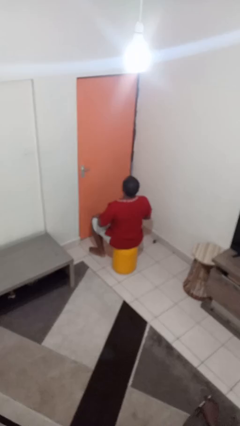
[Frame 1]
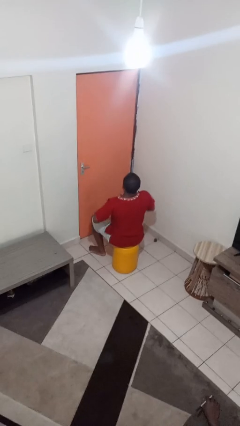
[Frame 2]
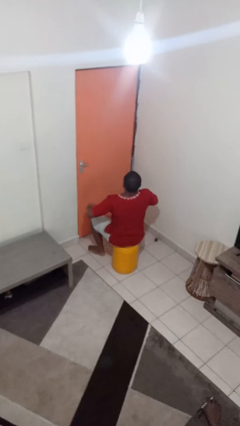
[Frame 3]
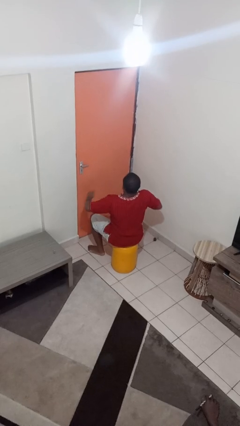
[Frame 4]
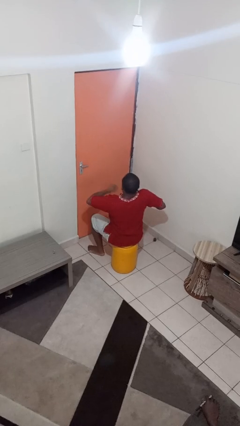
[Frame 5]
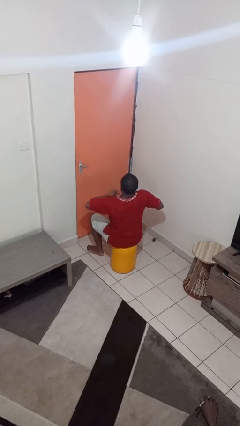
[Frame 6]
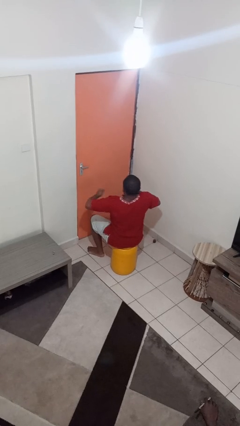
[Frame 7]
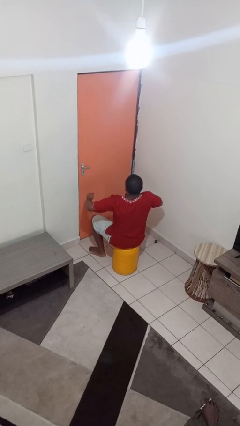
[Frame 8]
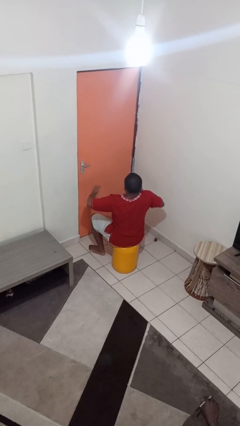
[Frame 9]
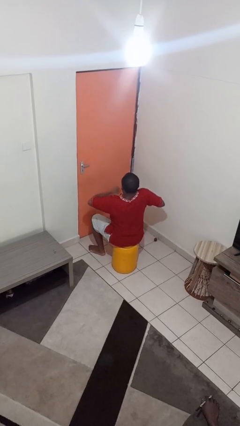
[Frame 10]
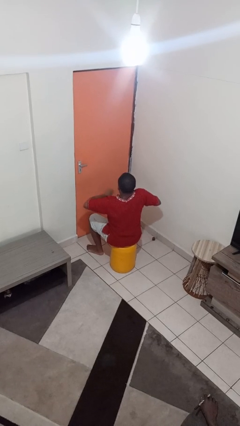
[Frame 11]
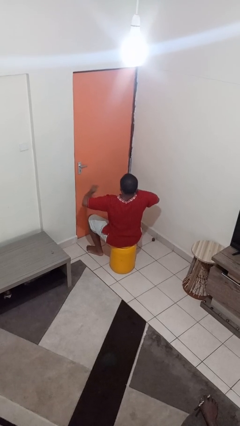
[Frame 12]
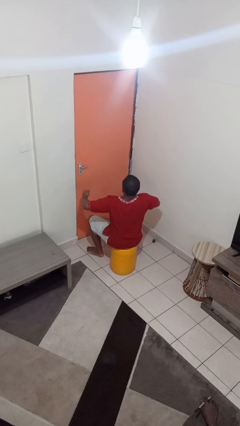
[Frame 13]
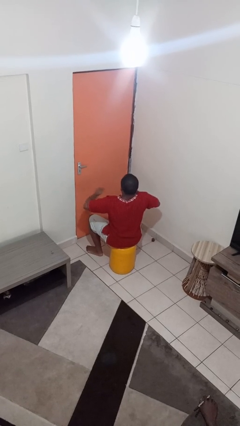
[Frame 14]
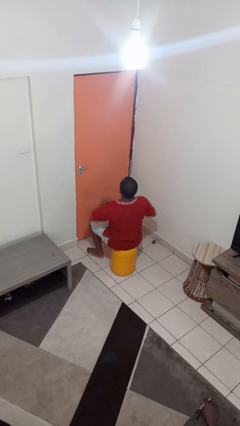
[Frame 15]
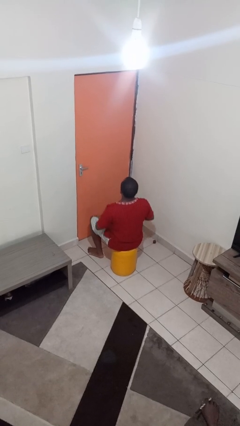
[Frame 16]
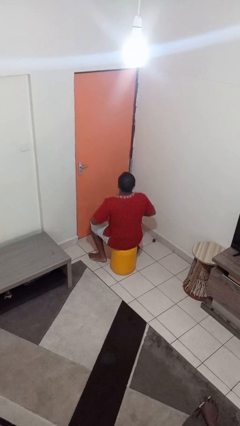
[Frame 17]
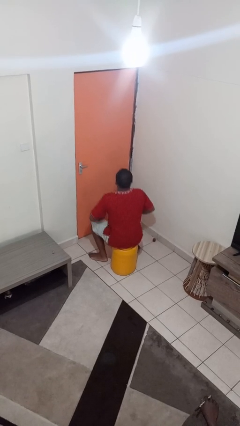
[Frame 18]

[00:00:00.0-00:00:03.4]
person drums on chest

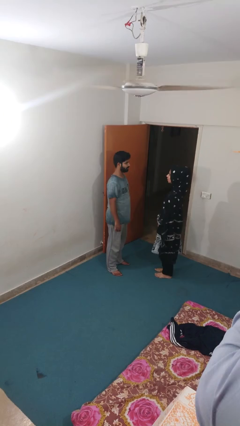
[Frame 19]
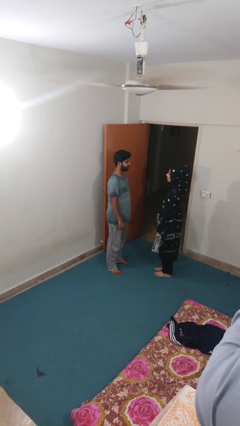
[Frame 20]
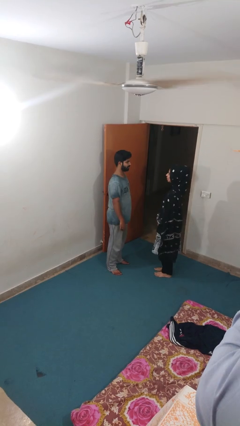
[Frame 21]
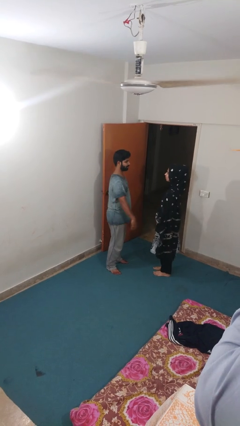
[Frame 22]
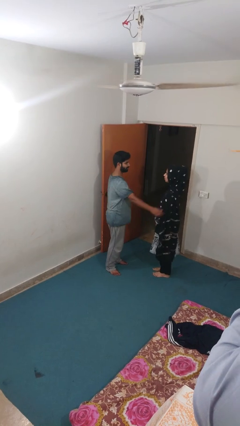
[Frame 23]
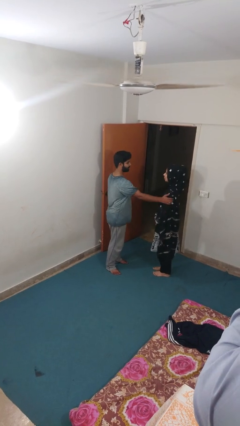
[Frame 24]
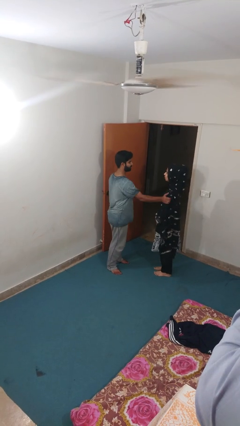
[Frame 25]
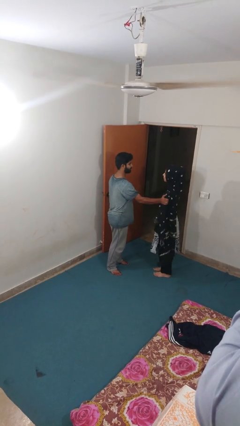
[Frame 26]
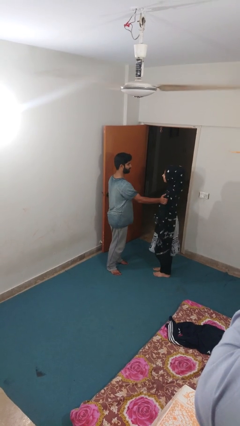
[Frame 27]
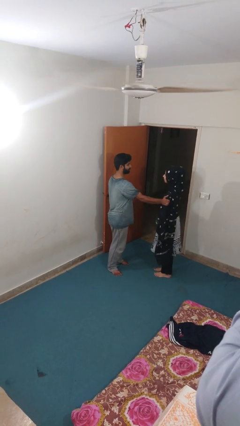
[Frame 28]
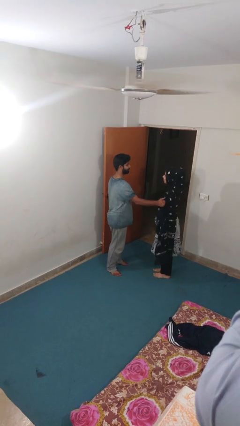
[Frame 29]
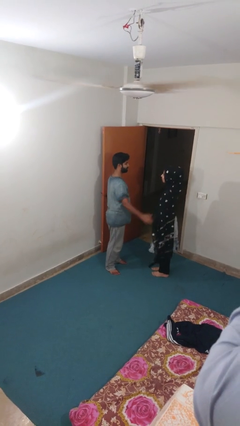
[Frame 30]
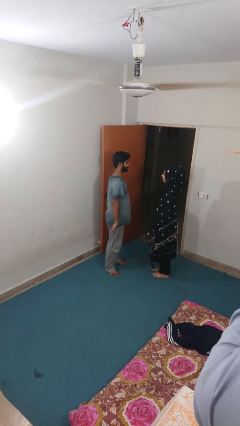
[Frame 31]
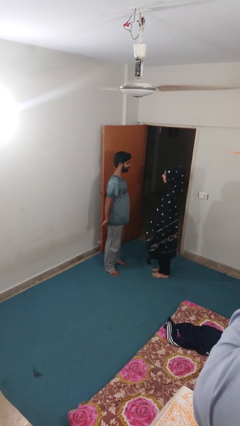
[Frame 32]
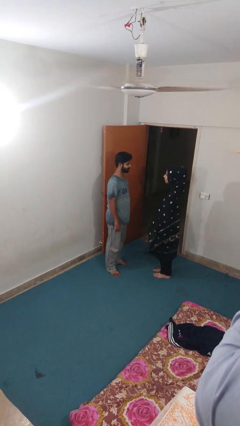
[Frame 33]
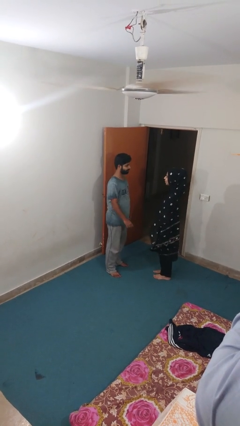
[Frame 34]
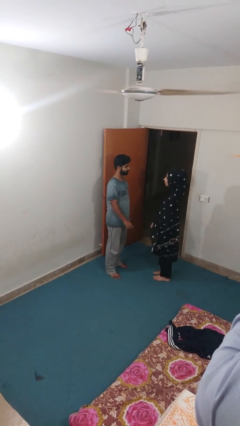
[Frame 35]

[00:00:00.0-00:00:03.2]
person grabs person by bicep

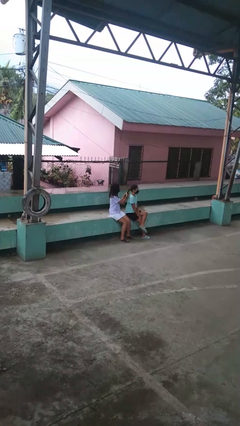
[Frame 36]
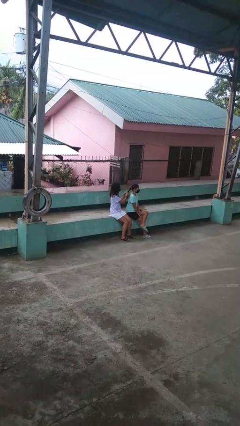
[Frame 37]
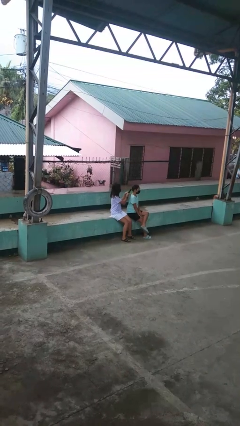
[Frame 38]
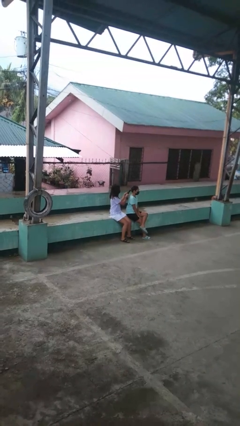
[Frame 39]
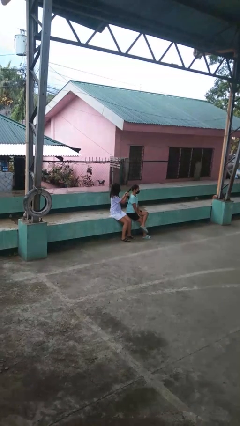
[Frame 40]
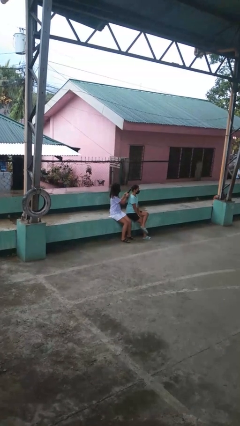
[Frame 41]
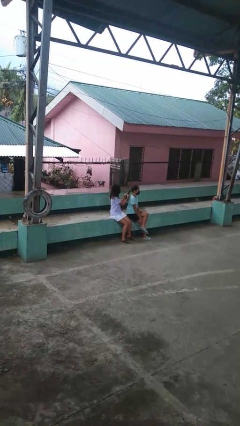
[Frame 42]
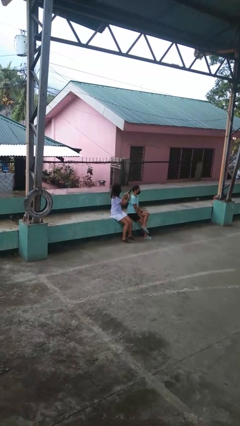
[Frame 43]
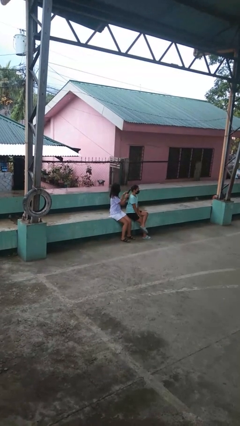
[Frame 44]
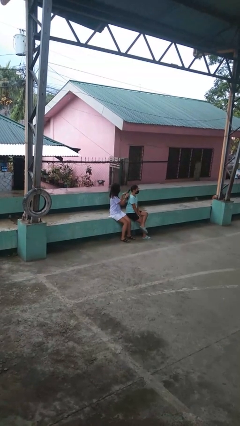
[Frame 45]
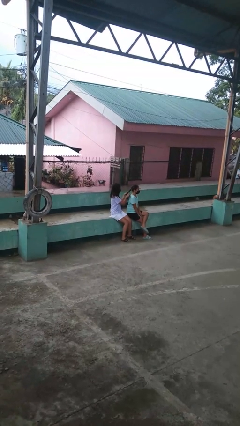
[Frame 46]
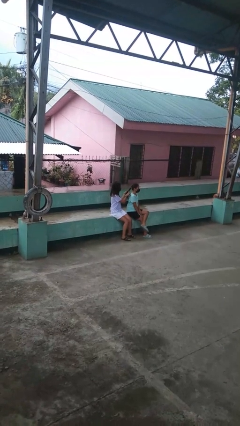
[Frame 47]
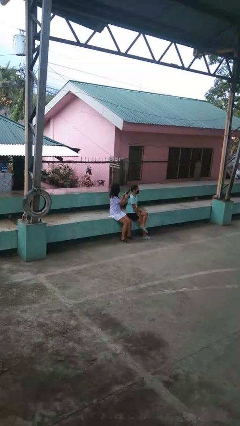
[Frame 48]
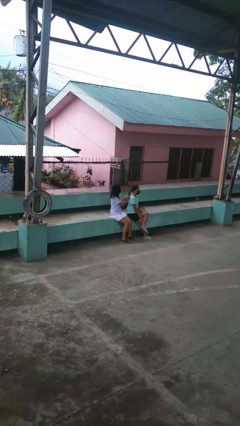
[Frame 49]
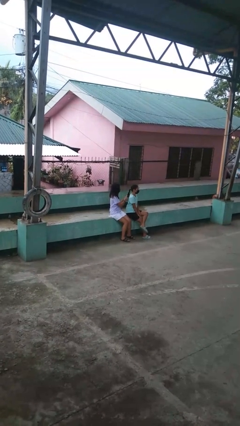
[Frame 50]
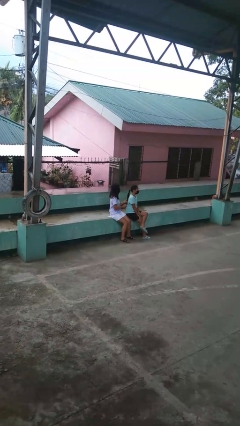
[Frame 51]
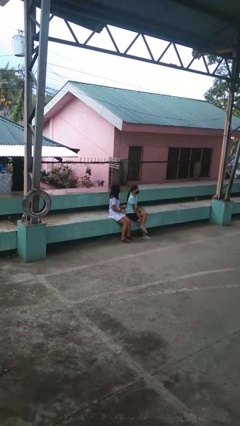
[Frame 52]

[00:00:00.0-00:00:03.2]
person braids hair of person

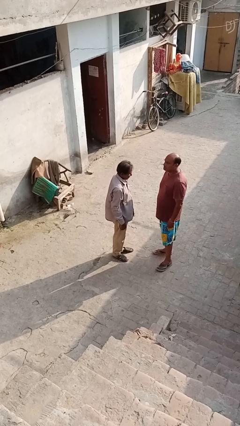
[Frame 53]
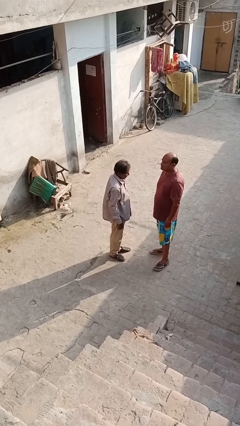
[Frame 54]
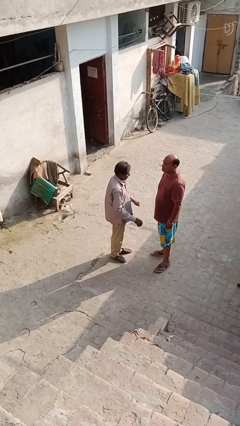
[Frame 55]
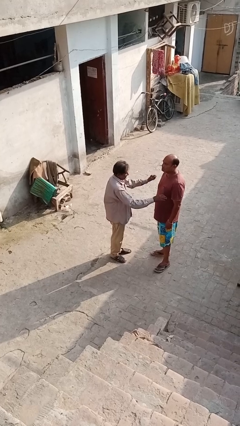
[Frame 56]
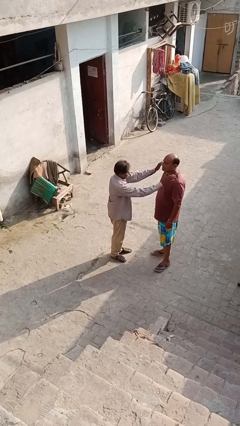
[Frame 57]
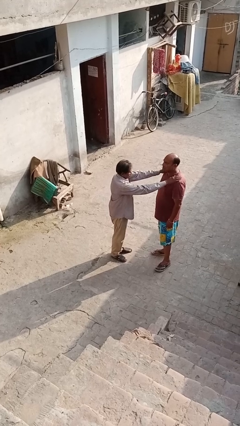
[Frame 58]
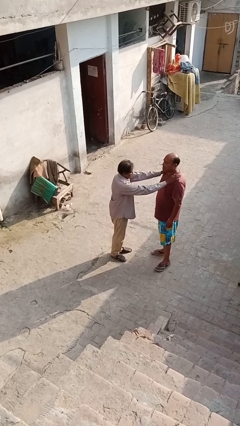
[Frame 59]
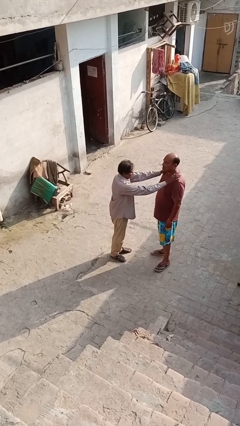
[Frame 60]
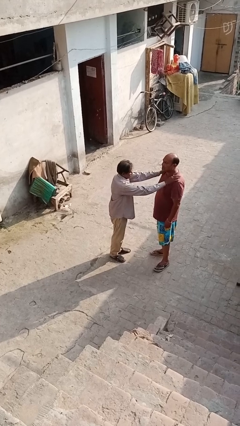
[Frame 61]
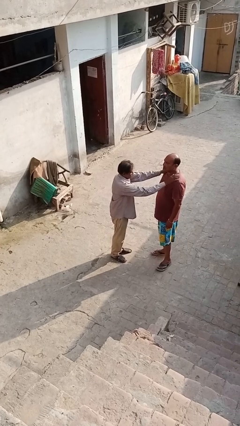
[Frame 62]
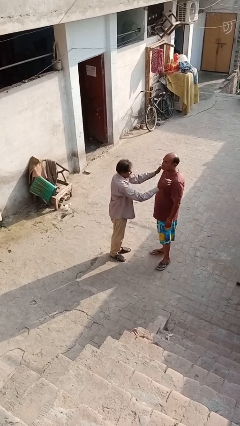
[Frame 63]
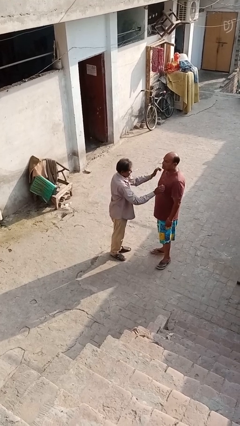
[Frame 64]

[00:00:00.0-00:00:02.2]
person pounds shoulders of person

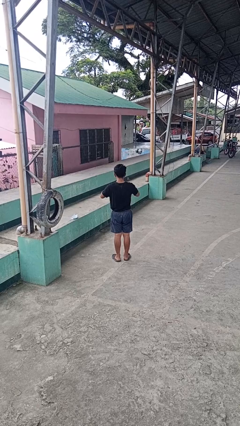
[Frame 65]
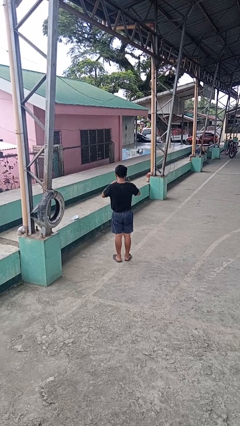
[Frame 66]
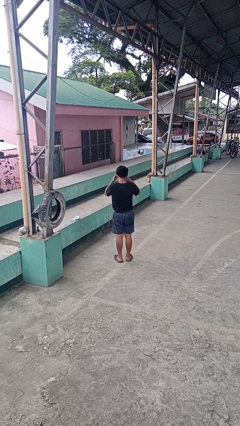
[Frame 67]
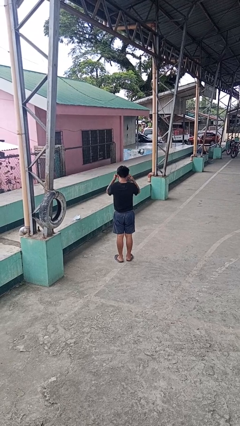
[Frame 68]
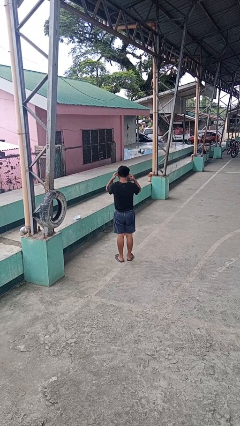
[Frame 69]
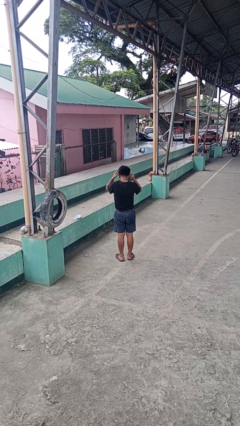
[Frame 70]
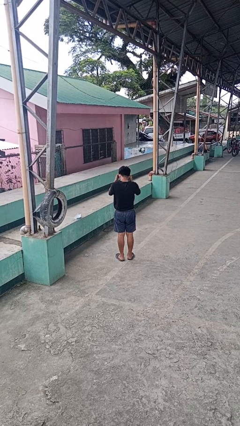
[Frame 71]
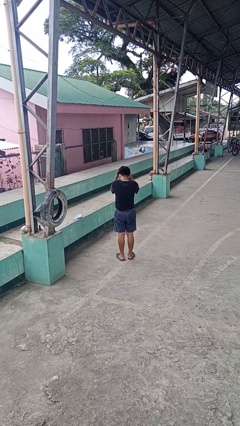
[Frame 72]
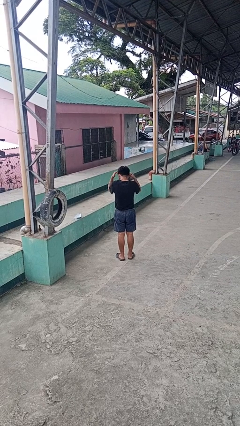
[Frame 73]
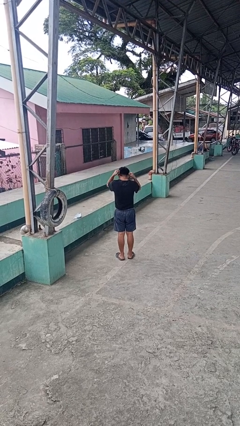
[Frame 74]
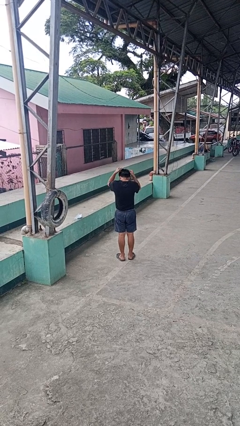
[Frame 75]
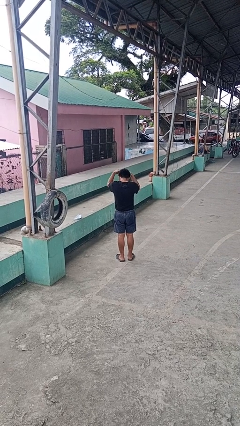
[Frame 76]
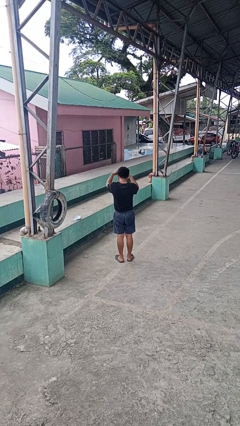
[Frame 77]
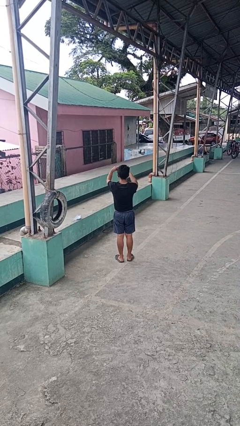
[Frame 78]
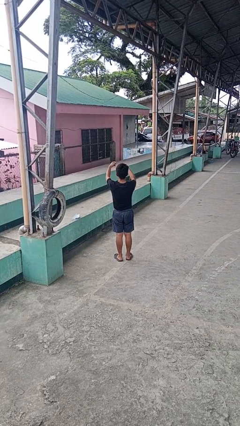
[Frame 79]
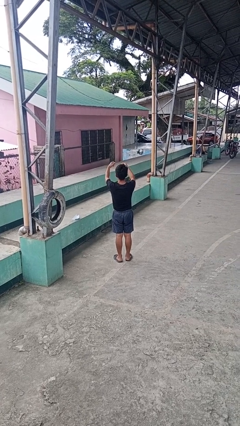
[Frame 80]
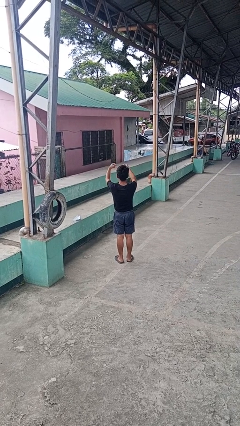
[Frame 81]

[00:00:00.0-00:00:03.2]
person takes off necklace

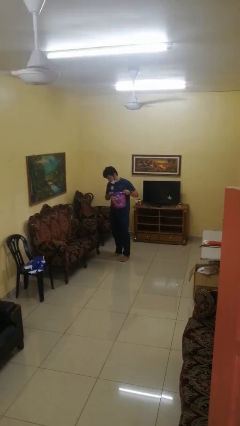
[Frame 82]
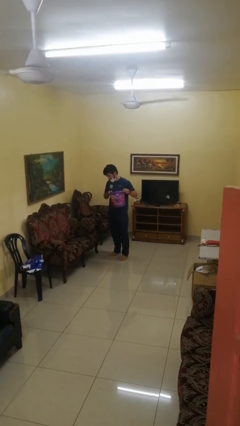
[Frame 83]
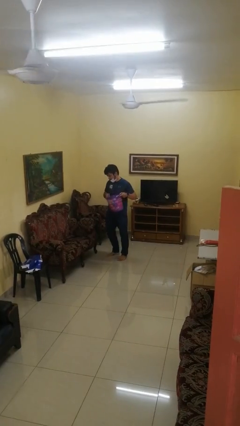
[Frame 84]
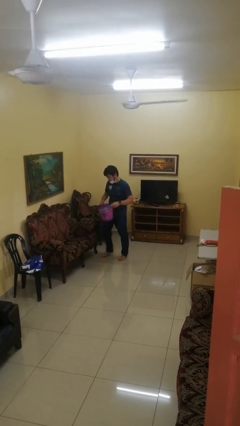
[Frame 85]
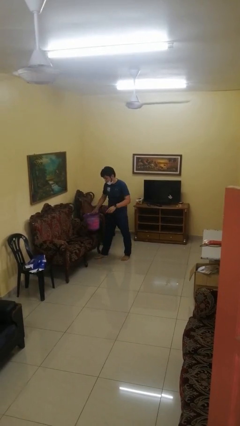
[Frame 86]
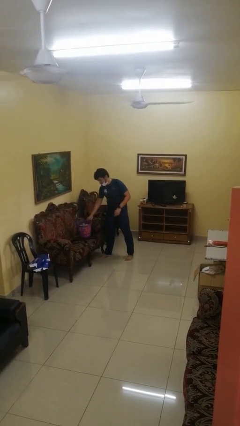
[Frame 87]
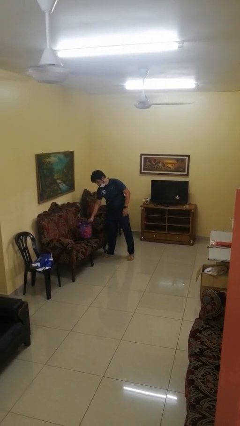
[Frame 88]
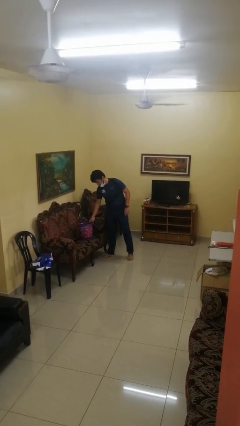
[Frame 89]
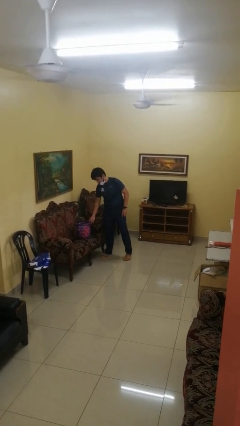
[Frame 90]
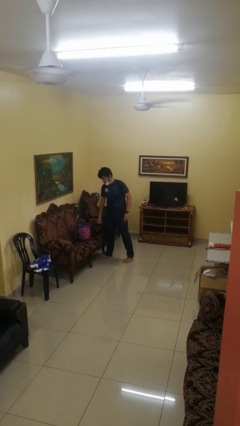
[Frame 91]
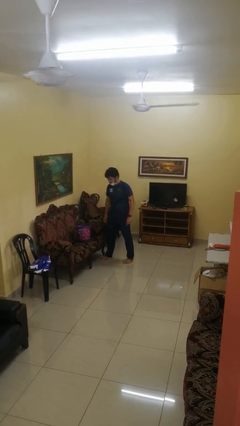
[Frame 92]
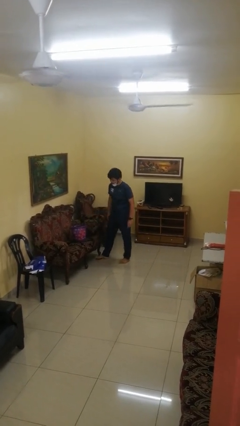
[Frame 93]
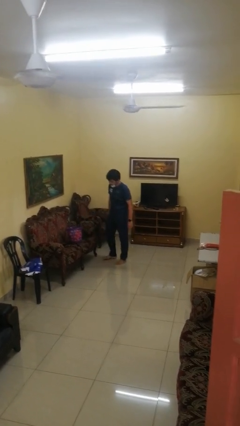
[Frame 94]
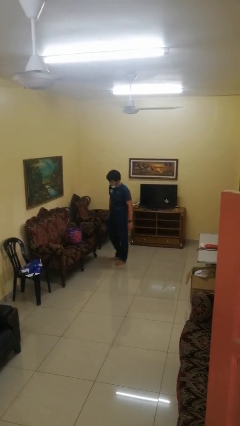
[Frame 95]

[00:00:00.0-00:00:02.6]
person puts down object on couch
